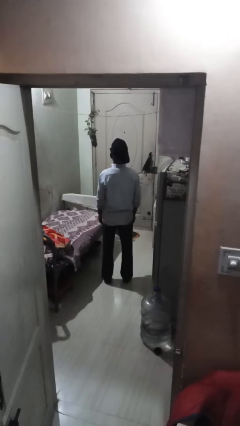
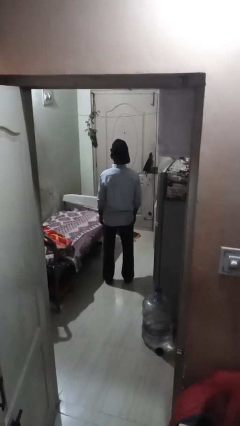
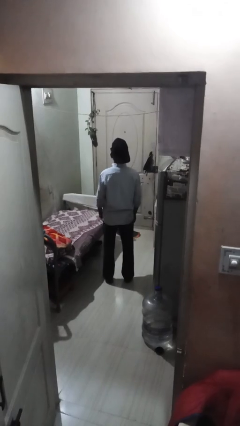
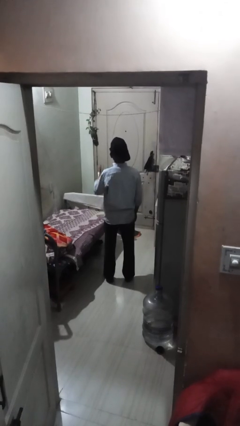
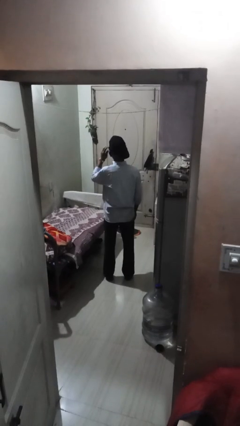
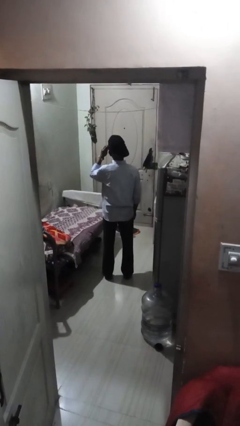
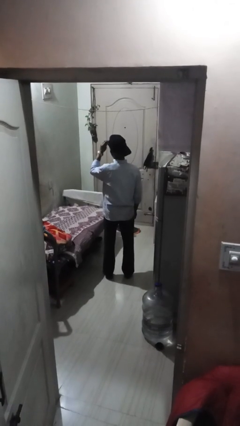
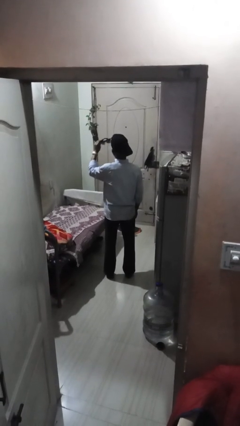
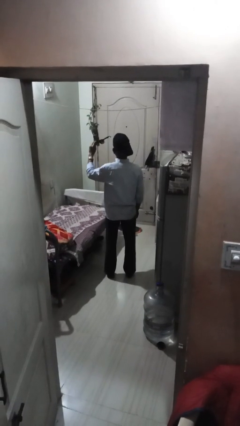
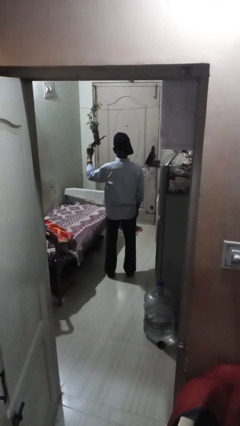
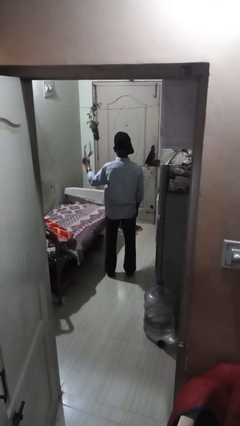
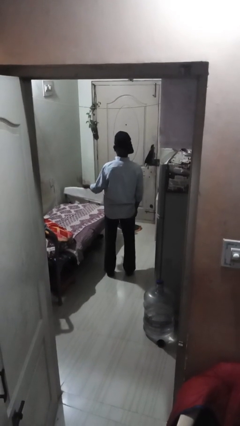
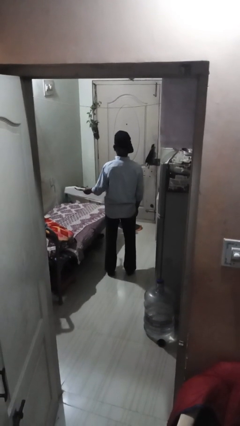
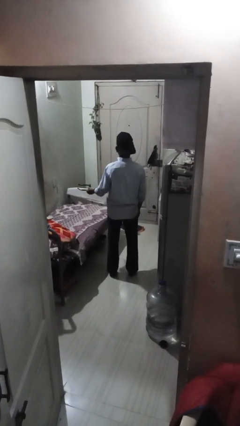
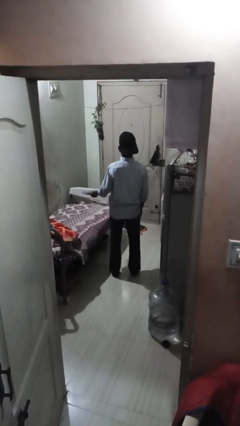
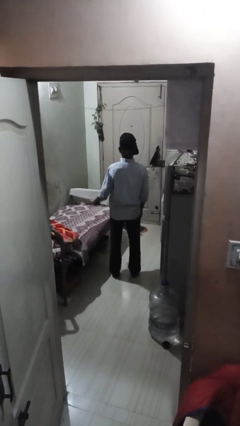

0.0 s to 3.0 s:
person takes off sunglasses

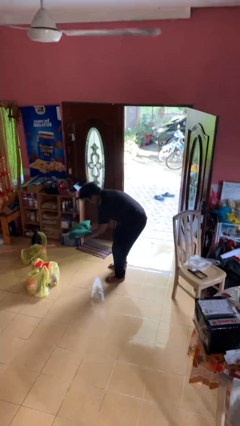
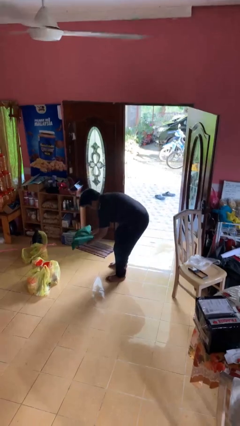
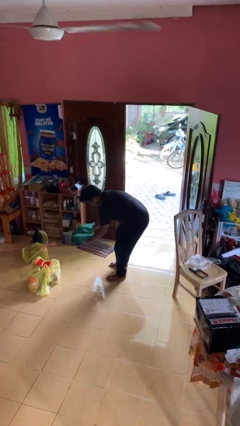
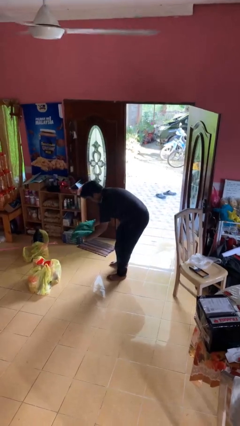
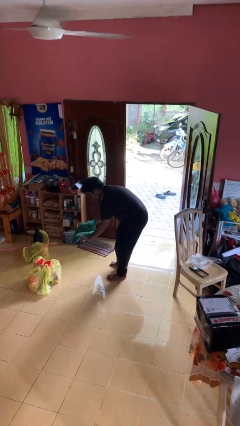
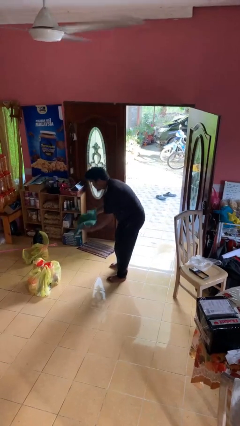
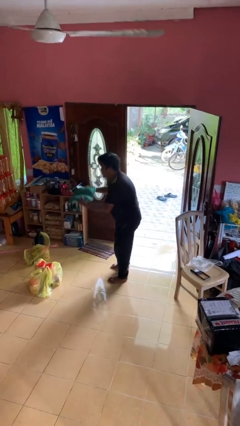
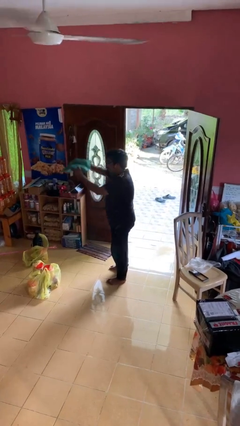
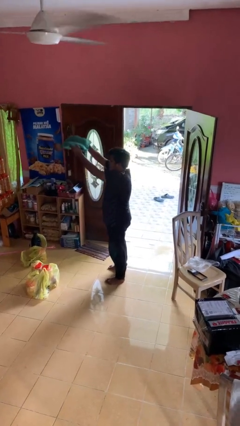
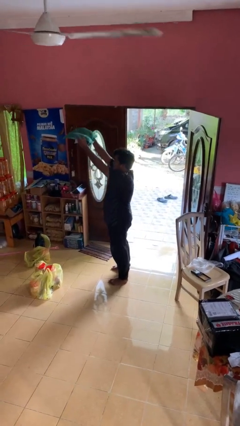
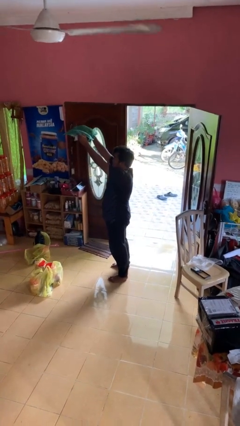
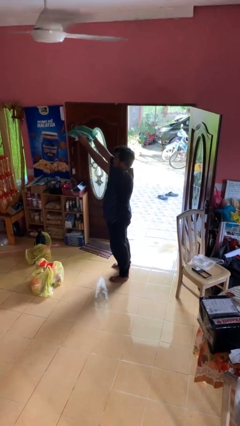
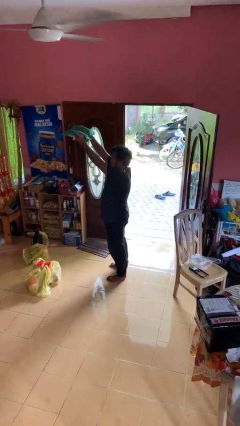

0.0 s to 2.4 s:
person catches dropped object

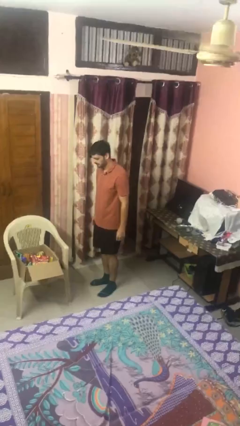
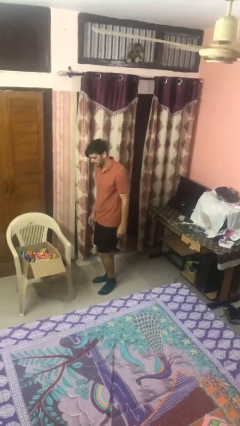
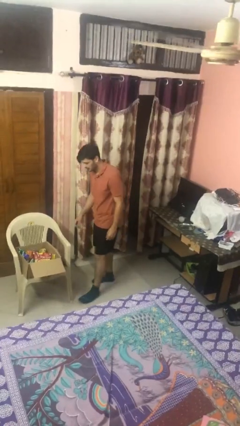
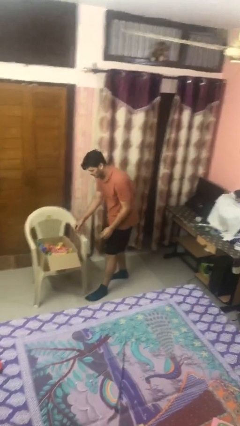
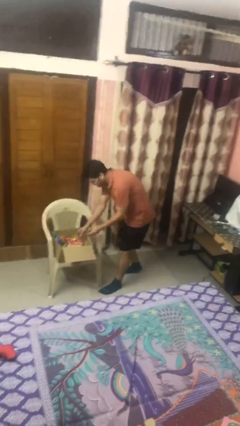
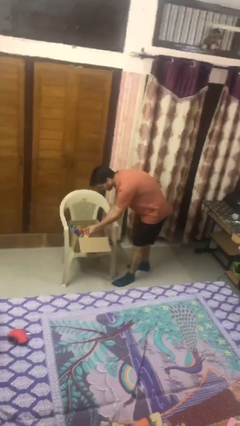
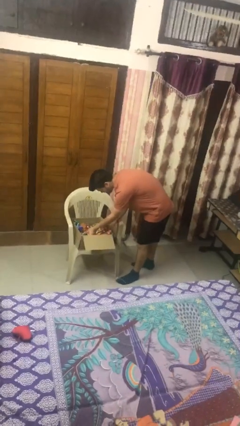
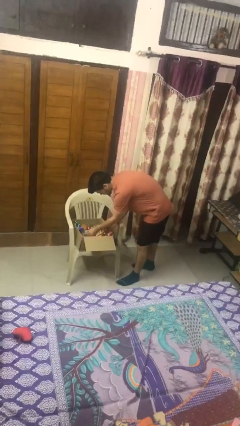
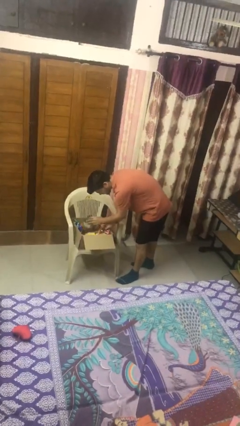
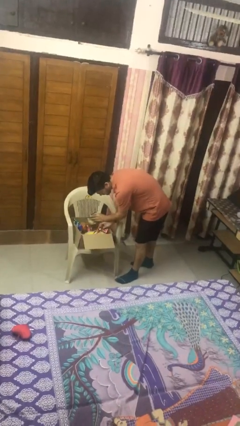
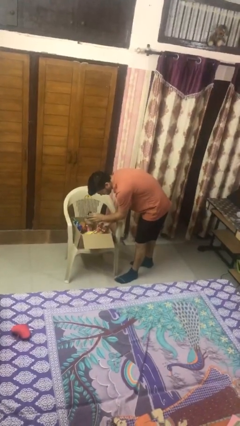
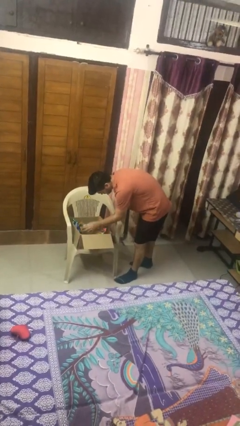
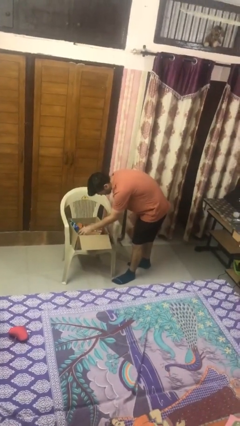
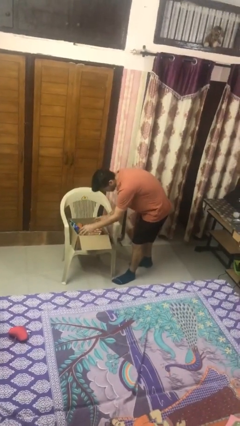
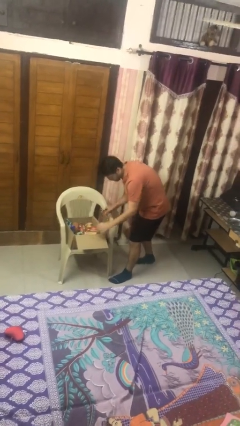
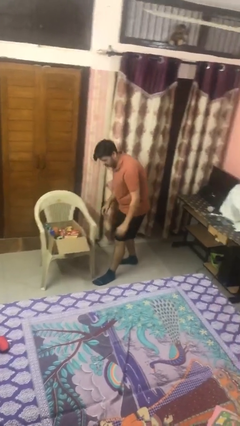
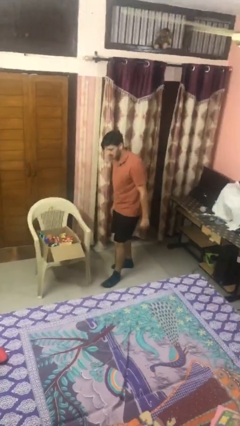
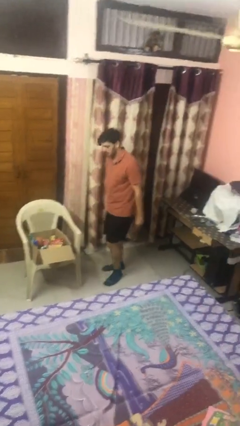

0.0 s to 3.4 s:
person searches in box

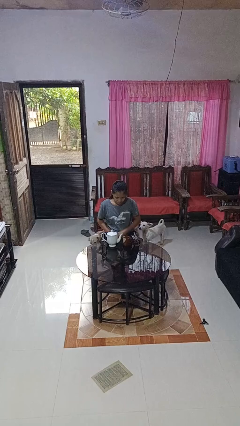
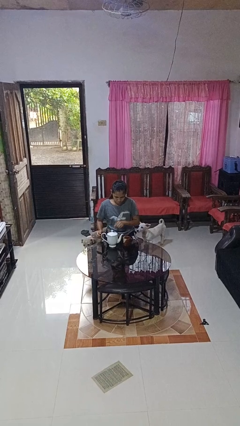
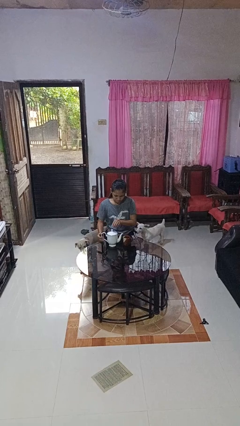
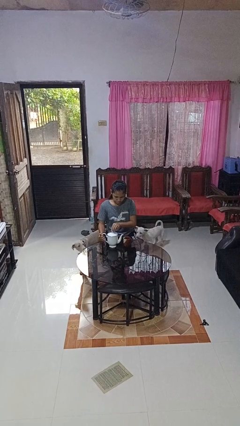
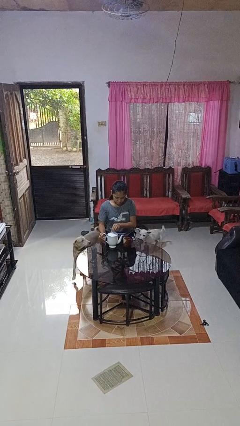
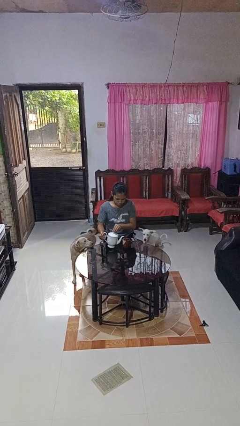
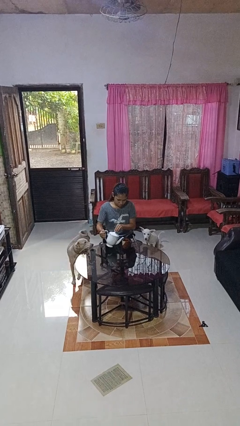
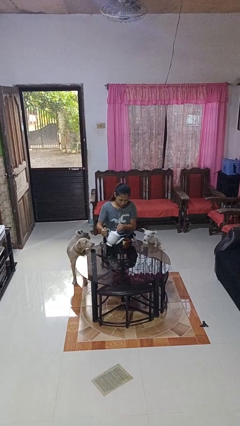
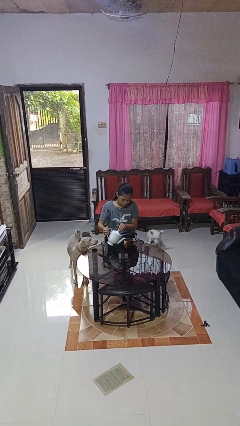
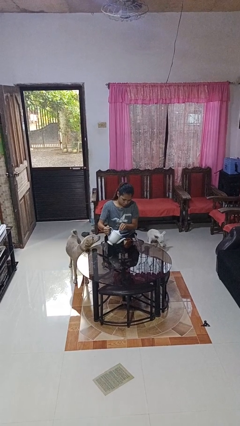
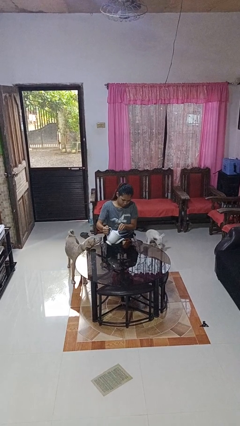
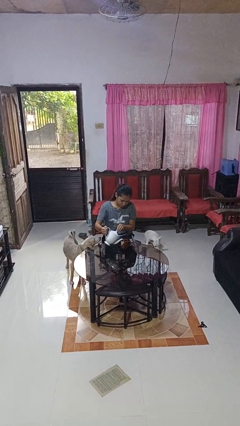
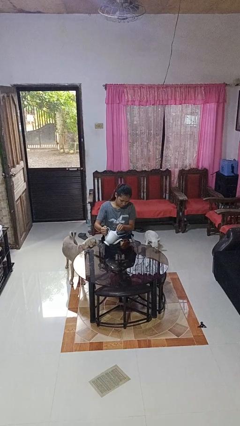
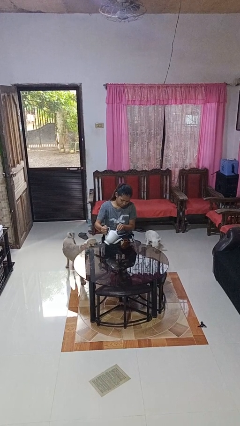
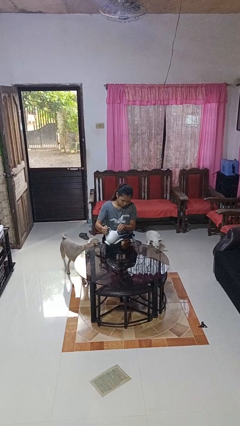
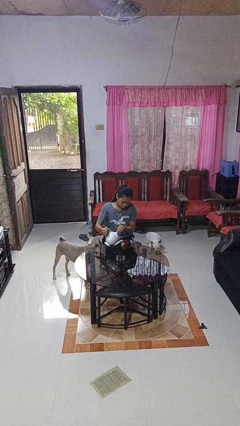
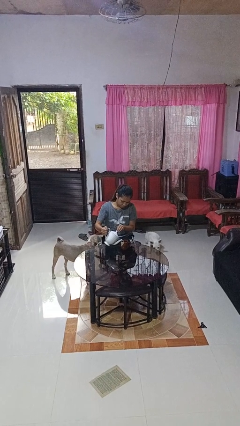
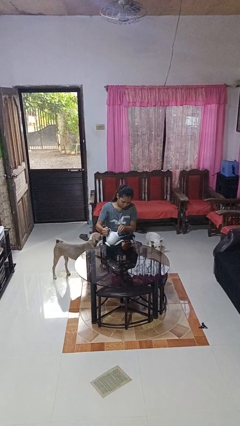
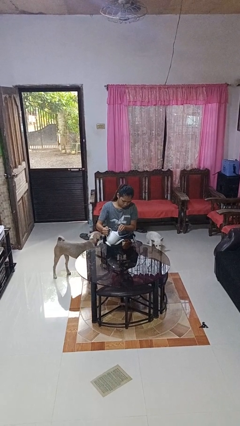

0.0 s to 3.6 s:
person pours coffee into mug

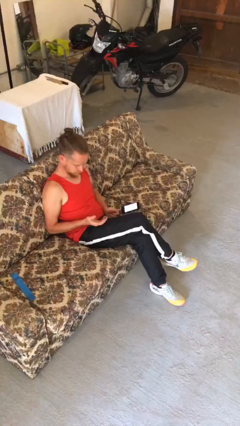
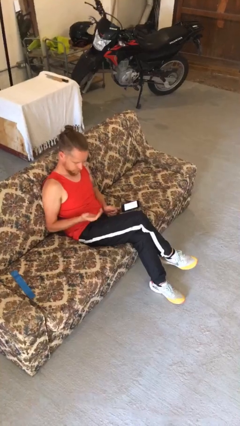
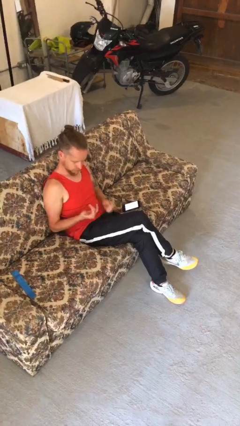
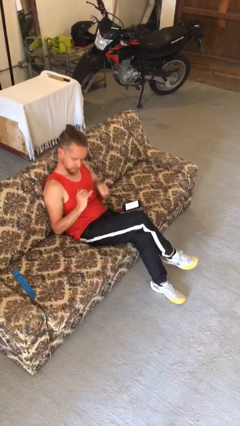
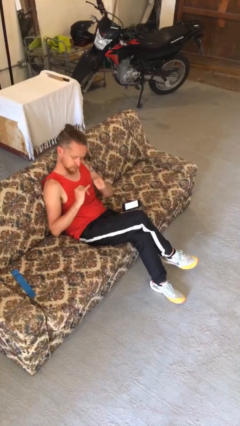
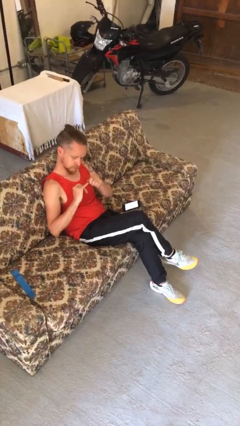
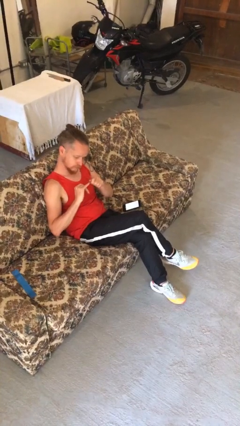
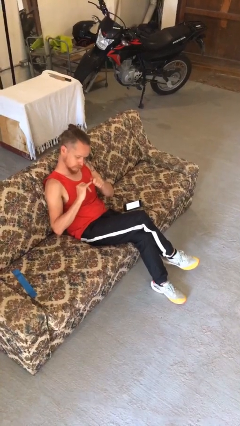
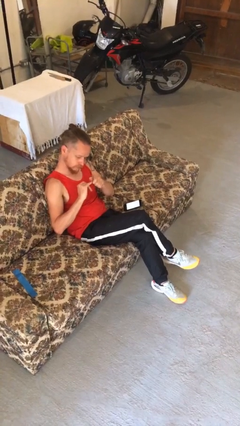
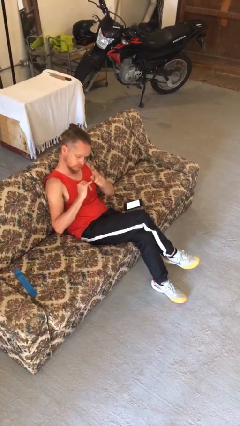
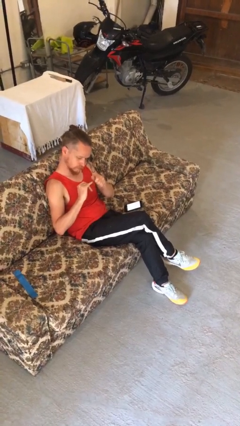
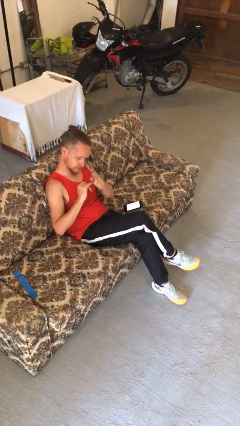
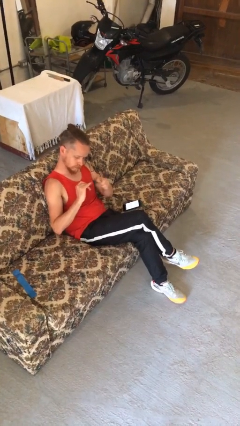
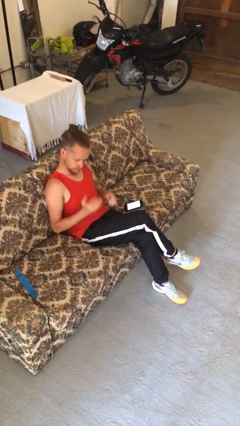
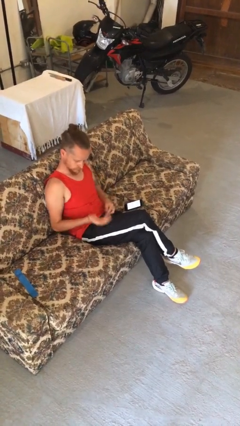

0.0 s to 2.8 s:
person files fingernails

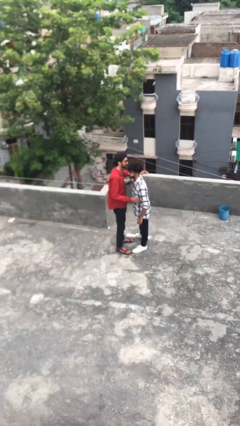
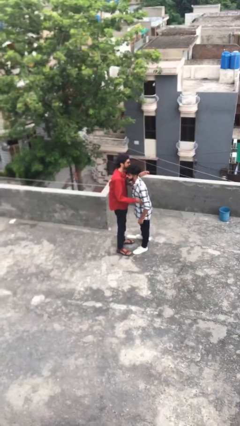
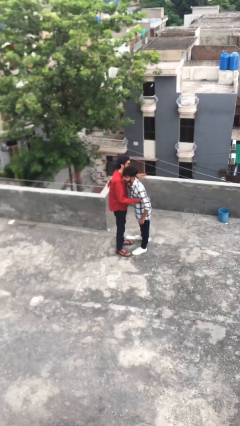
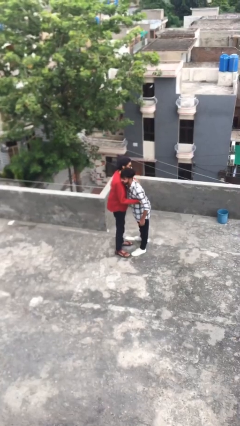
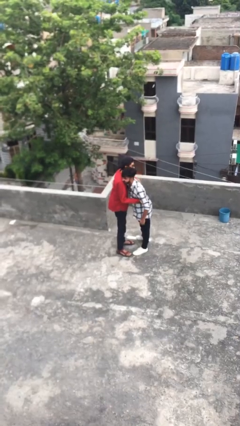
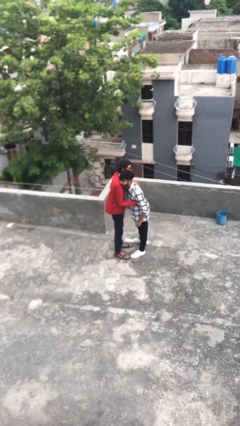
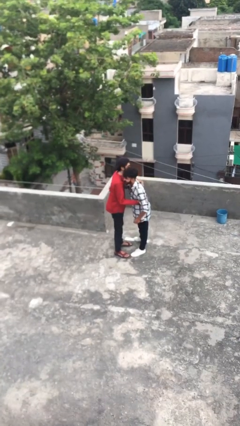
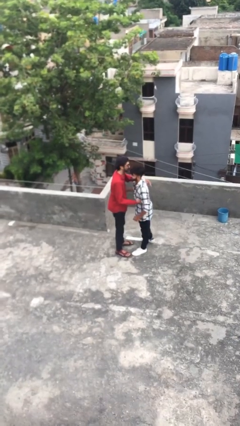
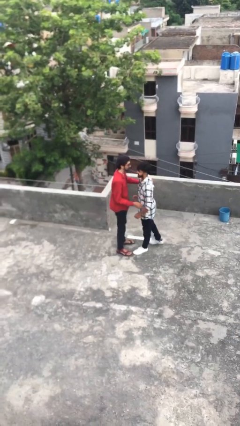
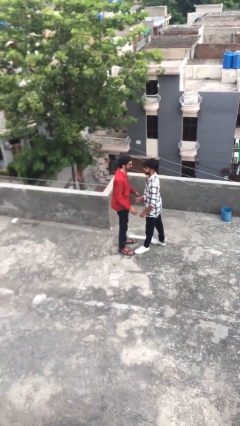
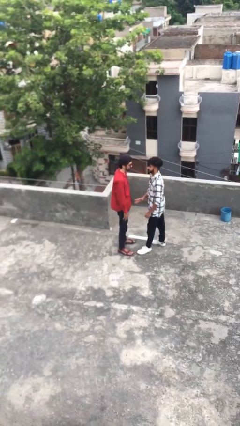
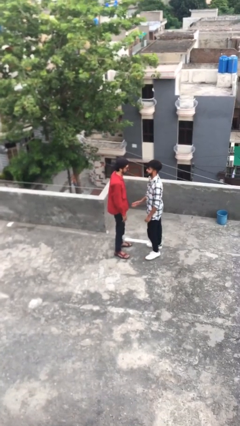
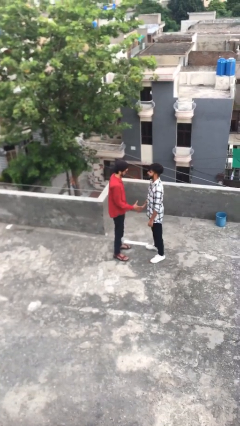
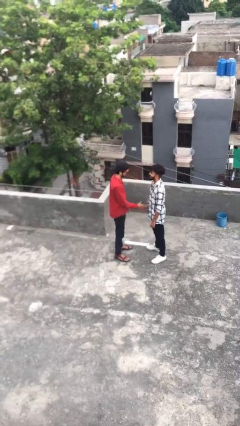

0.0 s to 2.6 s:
person embraces person
